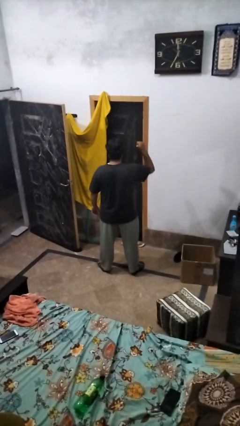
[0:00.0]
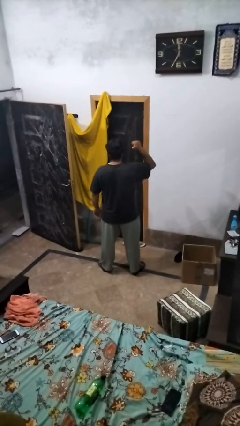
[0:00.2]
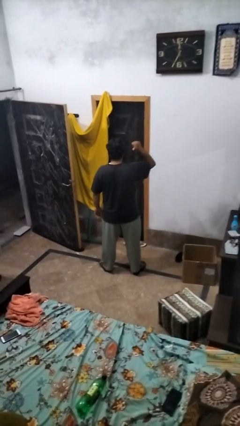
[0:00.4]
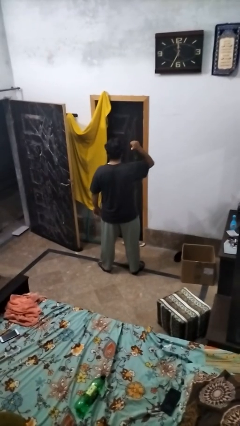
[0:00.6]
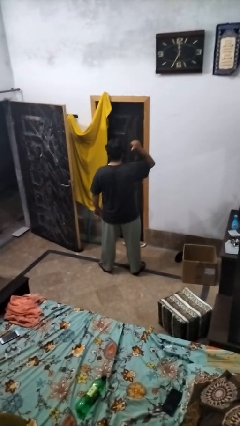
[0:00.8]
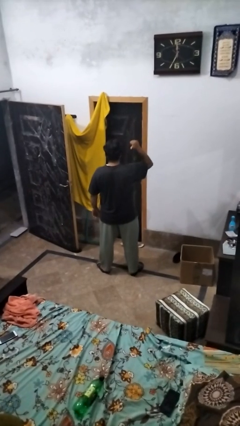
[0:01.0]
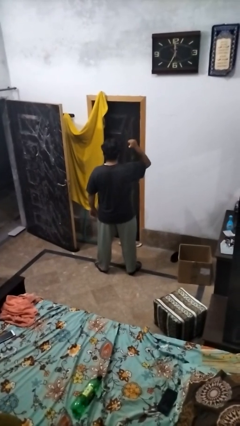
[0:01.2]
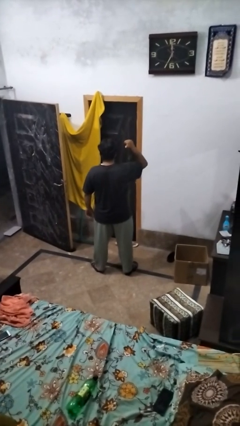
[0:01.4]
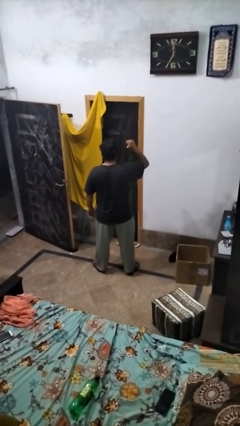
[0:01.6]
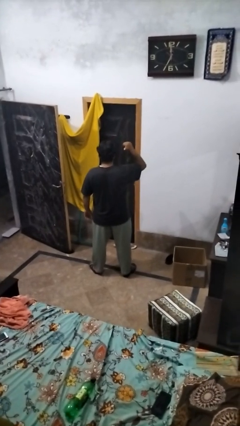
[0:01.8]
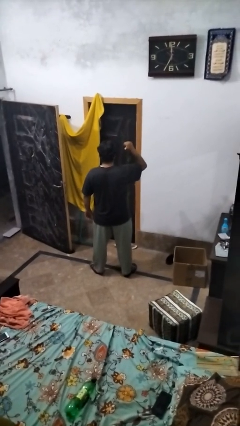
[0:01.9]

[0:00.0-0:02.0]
person gestures behind me

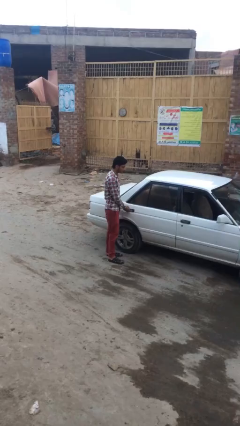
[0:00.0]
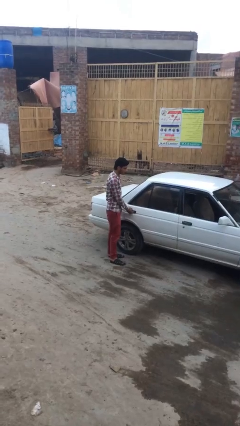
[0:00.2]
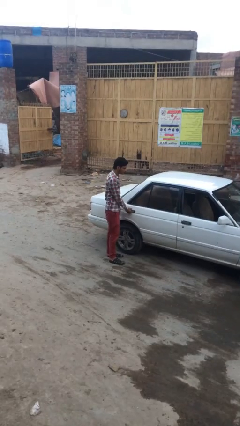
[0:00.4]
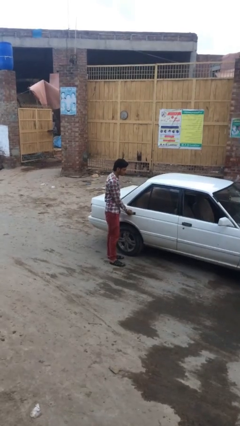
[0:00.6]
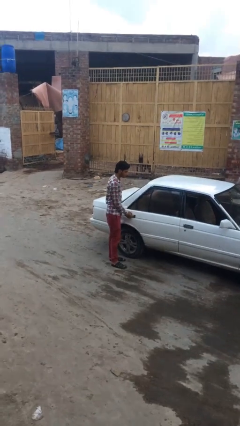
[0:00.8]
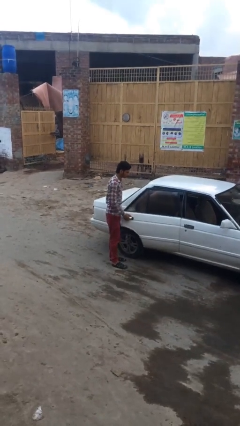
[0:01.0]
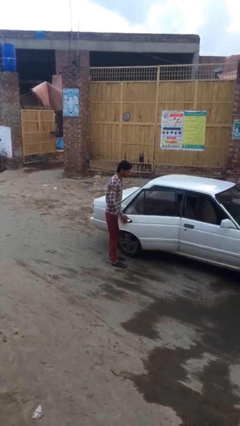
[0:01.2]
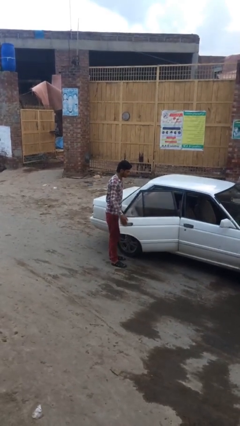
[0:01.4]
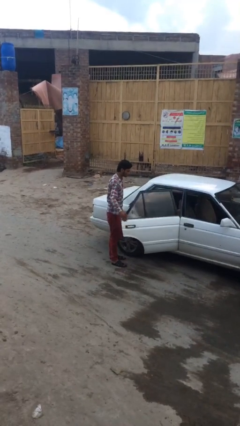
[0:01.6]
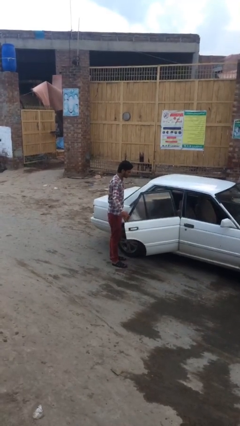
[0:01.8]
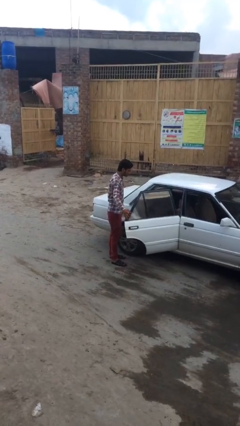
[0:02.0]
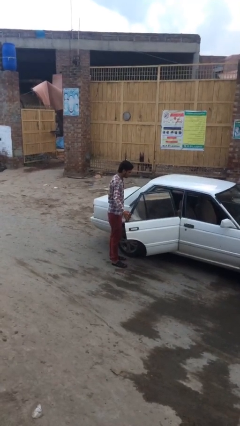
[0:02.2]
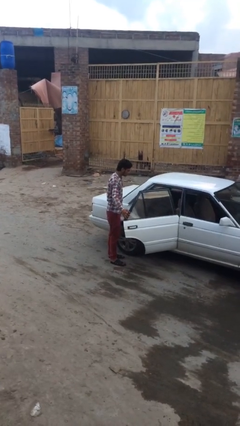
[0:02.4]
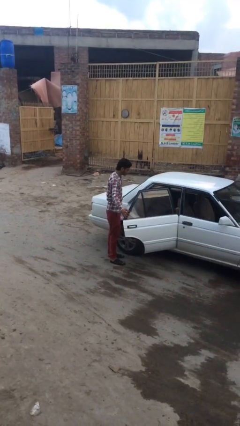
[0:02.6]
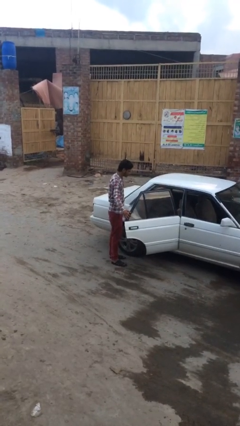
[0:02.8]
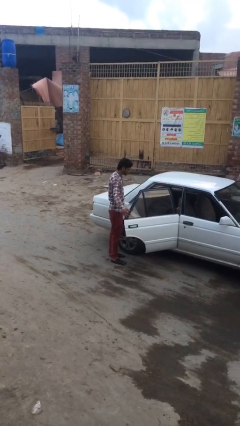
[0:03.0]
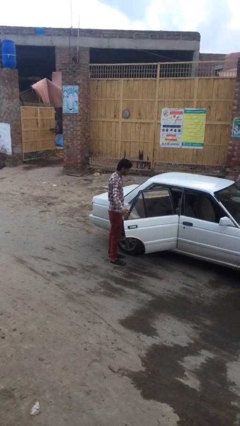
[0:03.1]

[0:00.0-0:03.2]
person opens car door

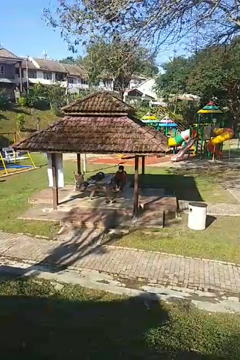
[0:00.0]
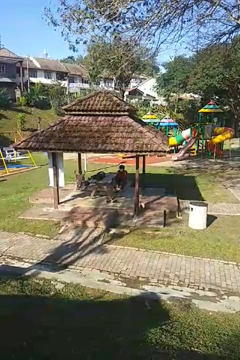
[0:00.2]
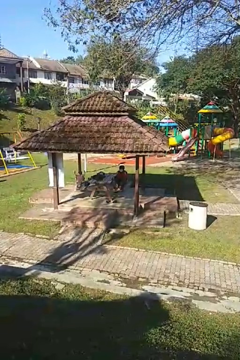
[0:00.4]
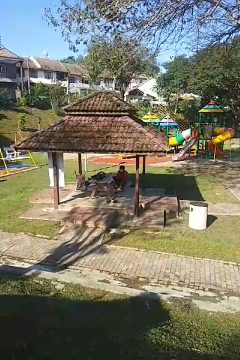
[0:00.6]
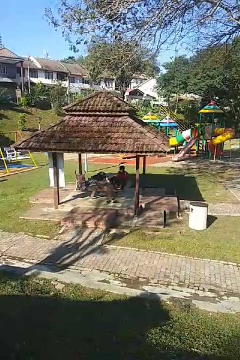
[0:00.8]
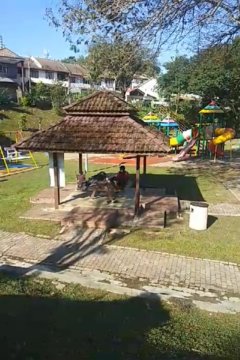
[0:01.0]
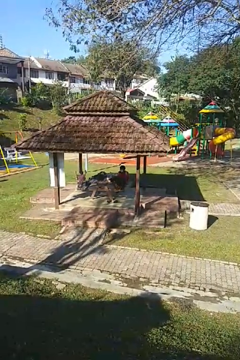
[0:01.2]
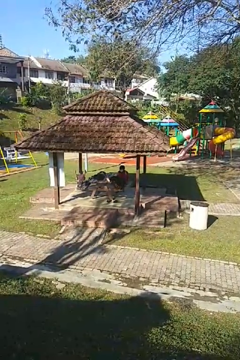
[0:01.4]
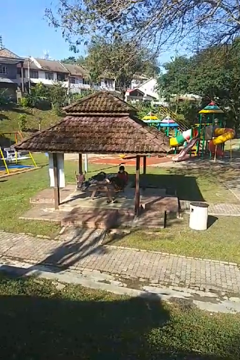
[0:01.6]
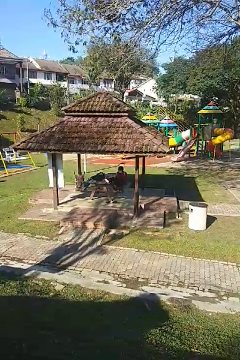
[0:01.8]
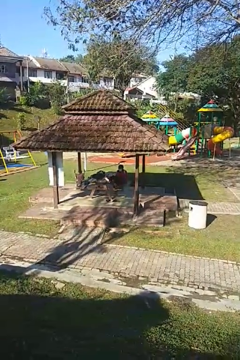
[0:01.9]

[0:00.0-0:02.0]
person puts feet up

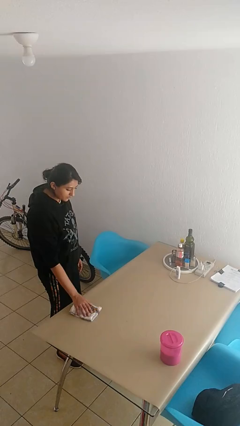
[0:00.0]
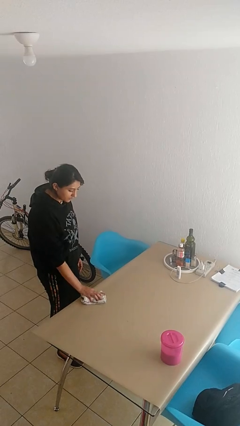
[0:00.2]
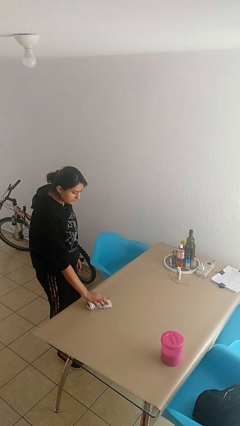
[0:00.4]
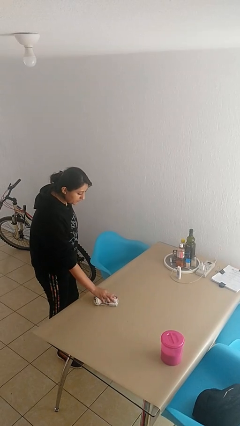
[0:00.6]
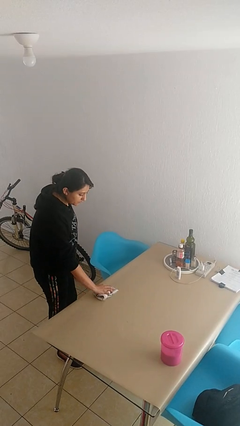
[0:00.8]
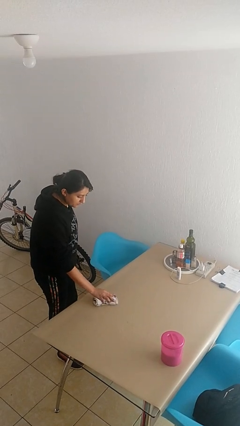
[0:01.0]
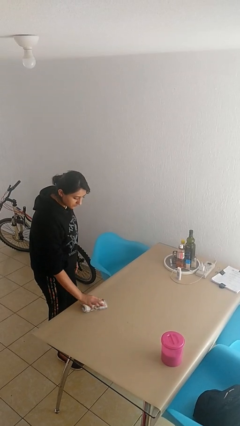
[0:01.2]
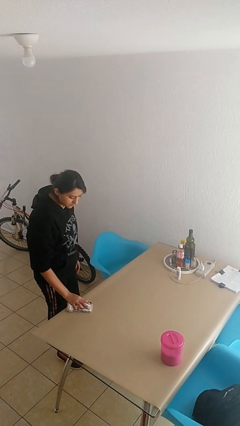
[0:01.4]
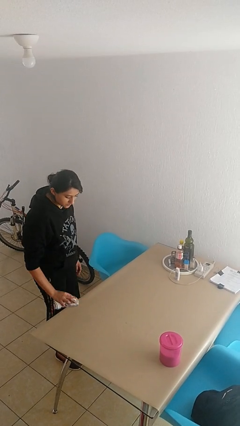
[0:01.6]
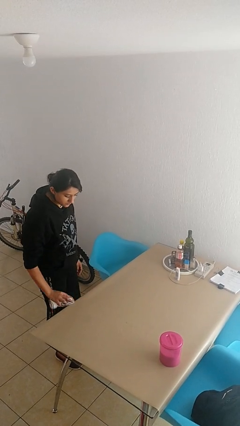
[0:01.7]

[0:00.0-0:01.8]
person cleans table with rag

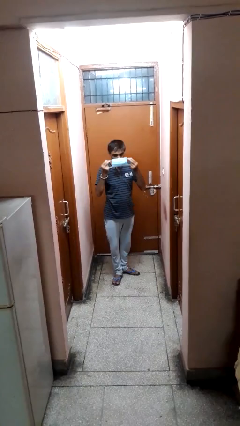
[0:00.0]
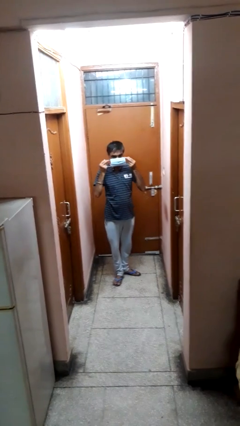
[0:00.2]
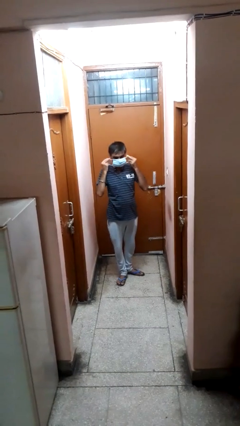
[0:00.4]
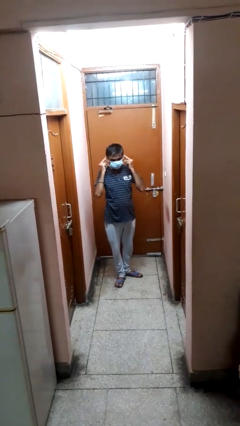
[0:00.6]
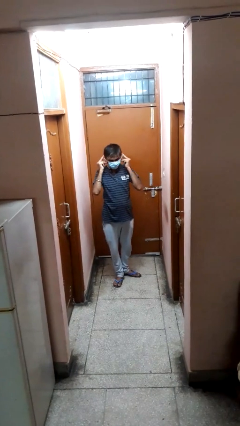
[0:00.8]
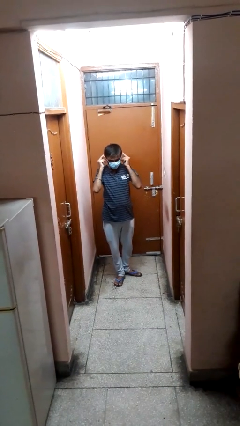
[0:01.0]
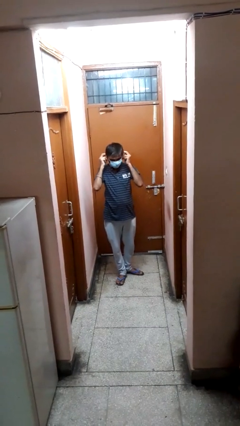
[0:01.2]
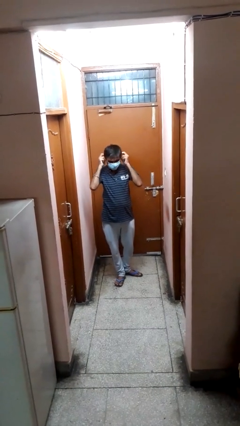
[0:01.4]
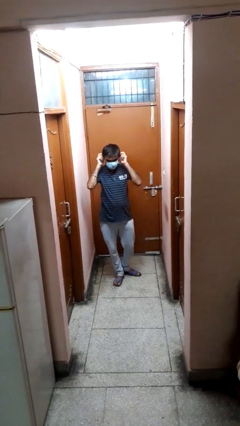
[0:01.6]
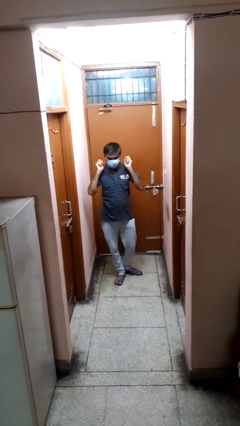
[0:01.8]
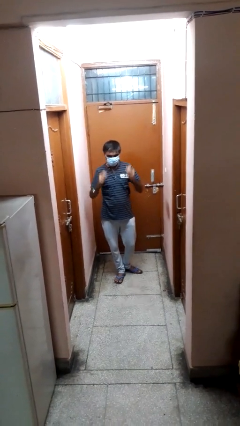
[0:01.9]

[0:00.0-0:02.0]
person puts on facemask

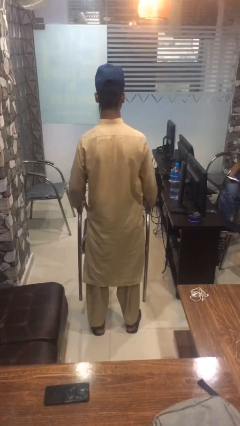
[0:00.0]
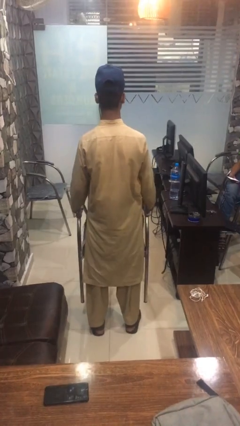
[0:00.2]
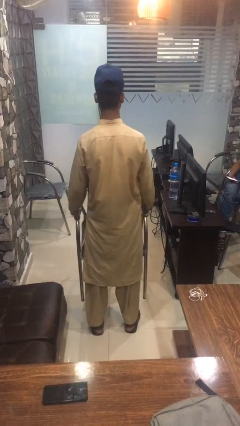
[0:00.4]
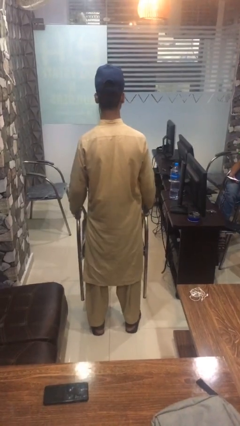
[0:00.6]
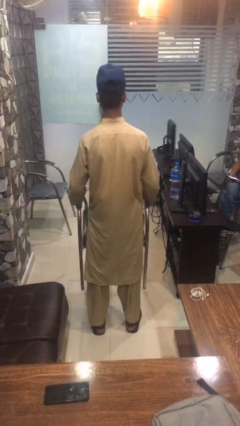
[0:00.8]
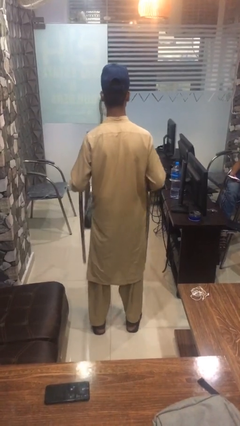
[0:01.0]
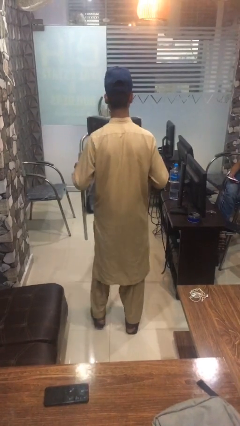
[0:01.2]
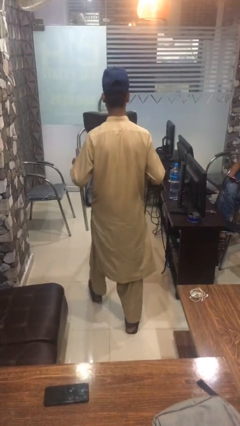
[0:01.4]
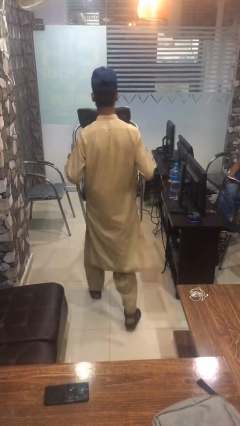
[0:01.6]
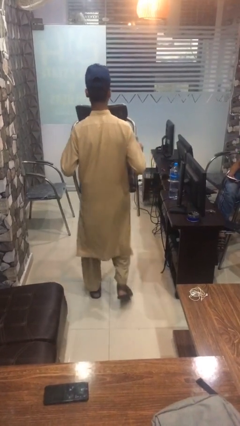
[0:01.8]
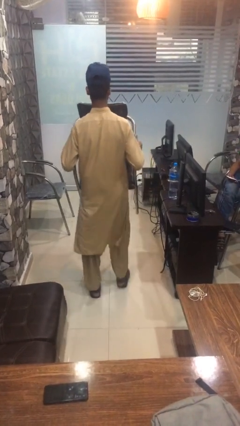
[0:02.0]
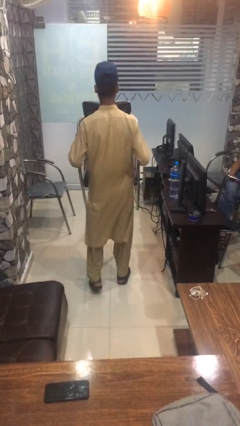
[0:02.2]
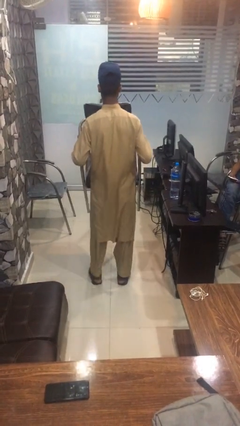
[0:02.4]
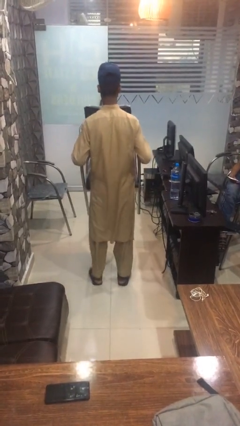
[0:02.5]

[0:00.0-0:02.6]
person carries furniture

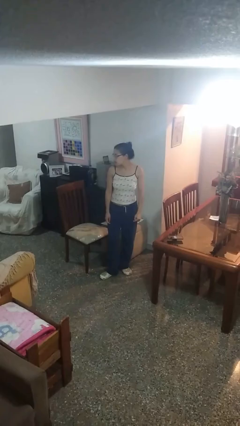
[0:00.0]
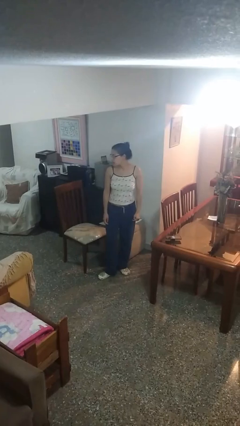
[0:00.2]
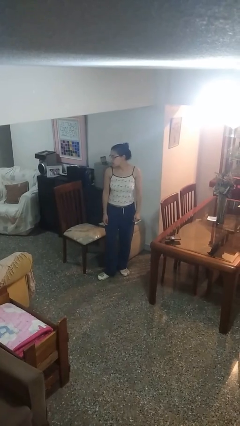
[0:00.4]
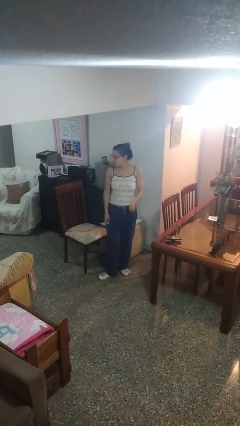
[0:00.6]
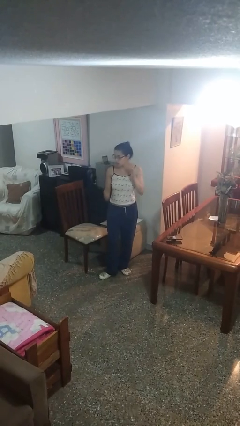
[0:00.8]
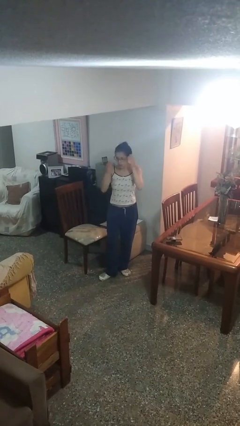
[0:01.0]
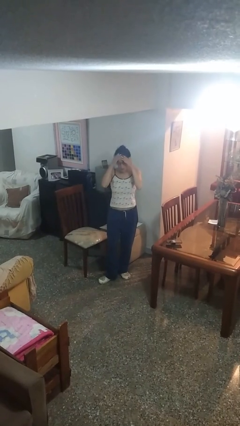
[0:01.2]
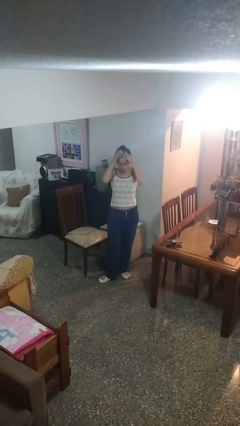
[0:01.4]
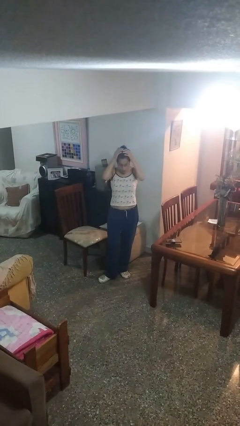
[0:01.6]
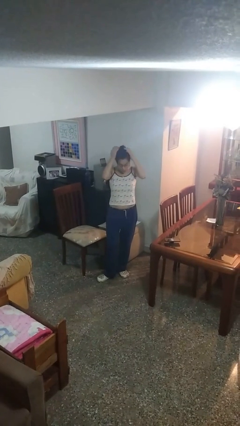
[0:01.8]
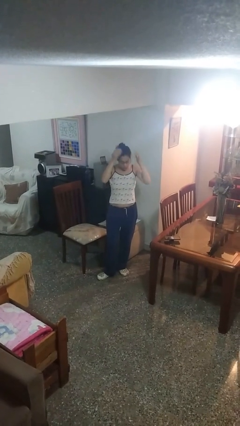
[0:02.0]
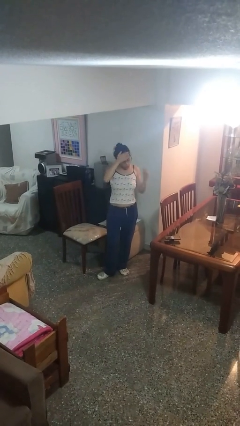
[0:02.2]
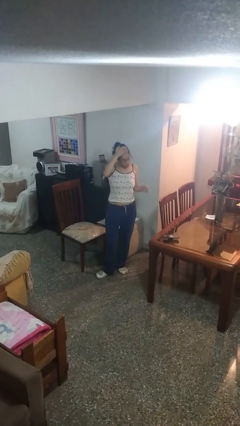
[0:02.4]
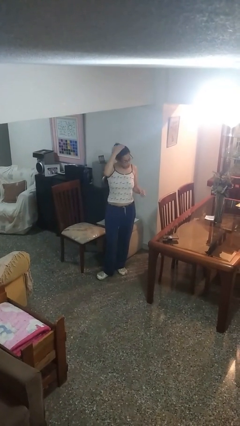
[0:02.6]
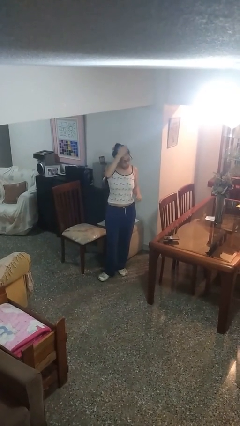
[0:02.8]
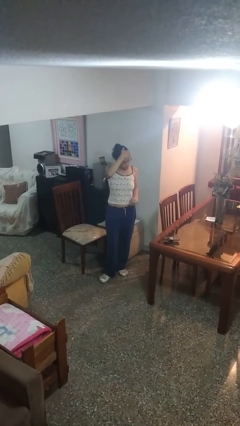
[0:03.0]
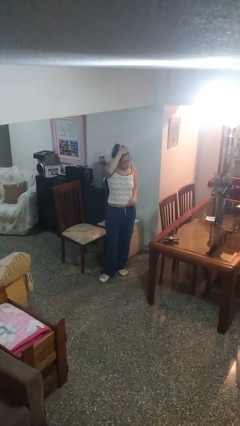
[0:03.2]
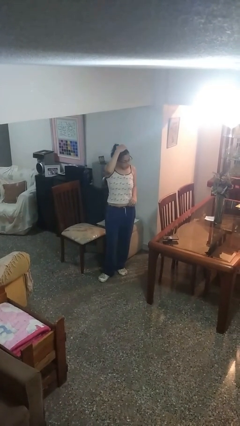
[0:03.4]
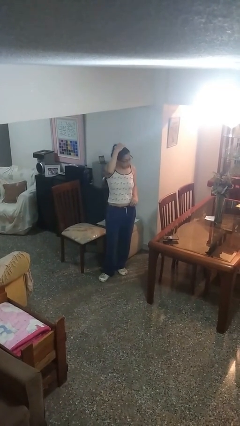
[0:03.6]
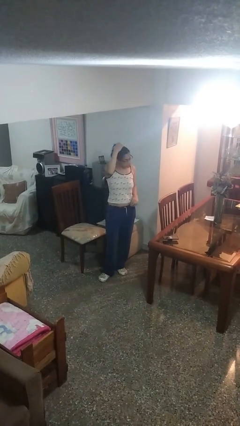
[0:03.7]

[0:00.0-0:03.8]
person pats head
